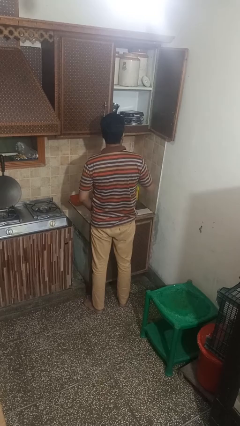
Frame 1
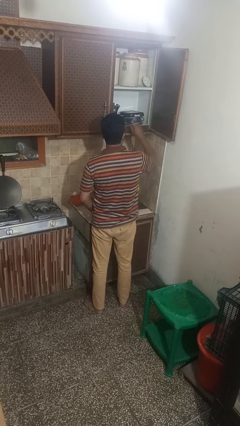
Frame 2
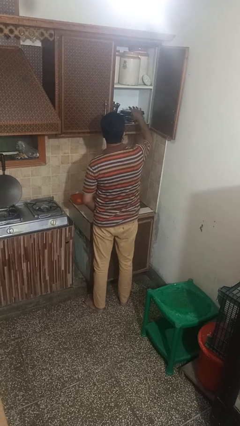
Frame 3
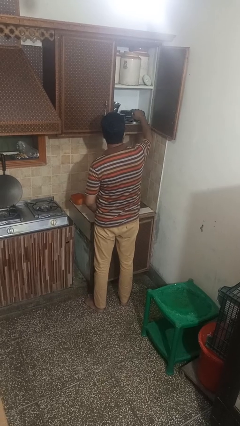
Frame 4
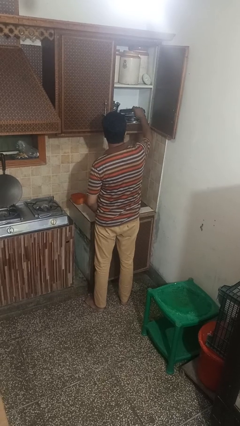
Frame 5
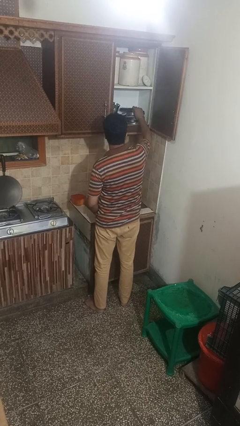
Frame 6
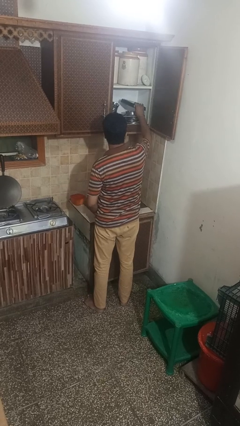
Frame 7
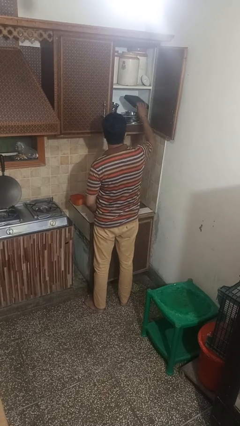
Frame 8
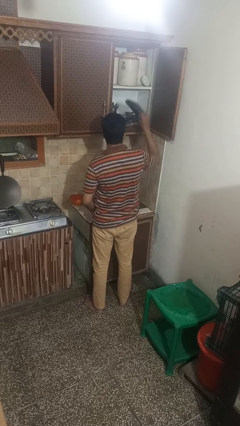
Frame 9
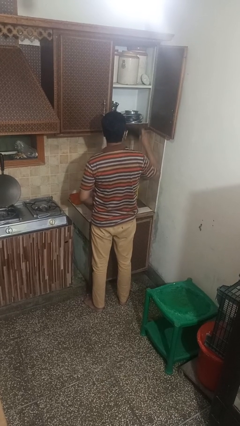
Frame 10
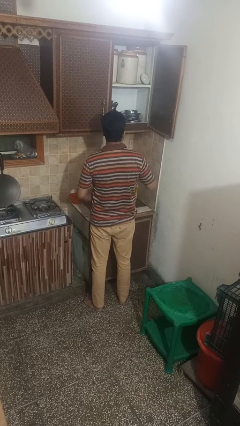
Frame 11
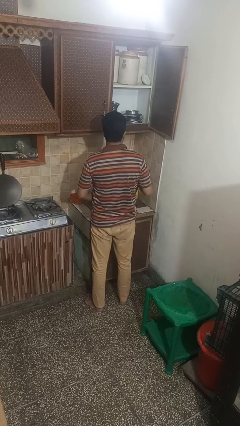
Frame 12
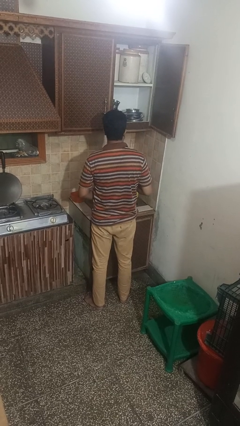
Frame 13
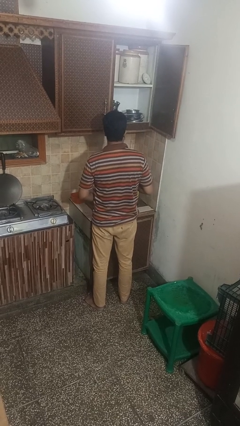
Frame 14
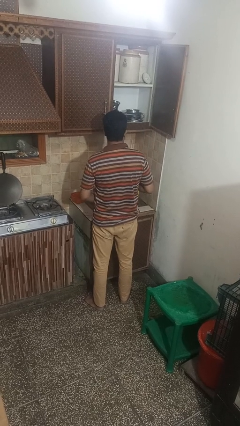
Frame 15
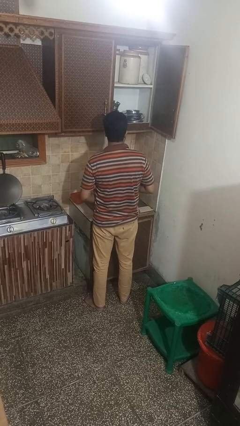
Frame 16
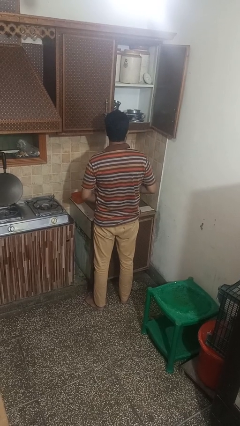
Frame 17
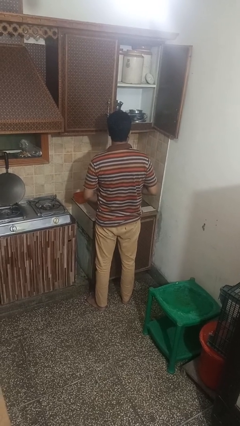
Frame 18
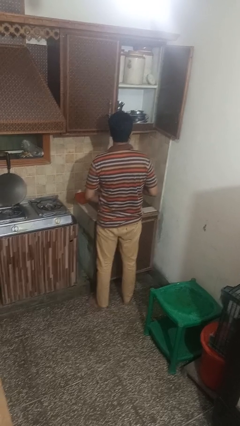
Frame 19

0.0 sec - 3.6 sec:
person takes object from cabinet

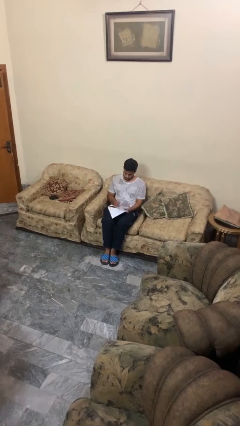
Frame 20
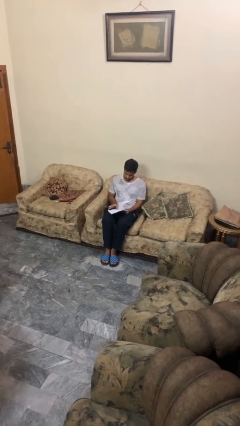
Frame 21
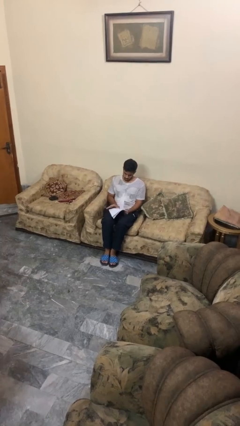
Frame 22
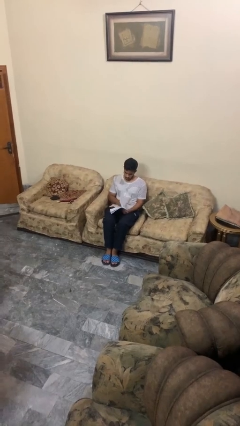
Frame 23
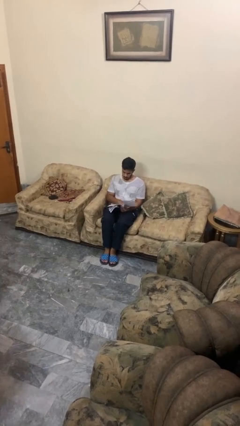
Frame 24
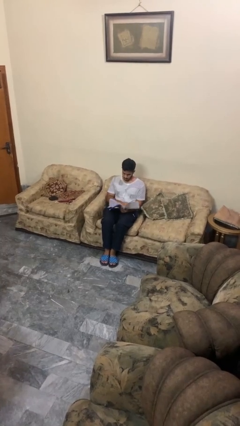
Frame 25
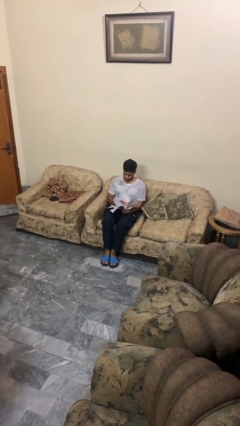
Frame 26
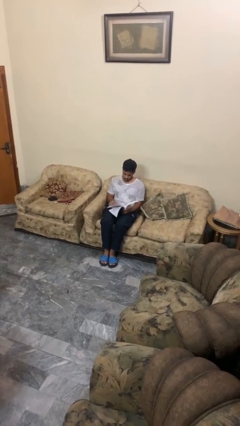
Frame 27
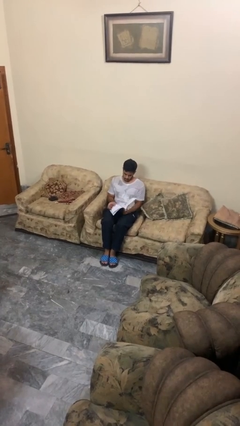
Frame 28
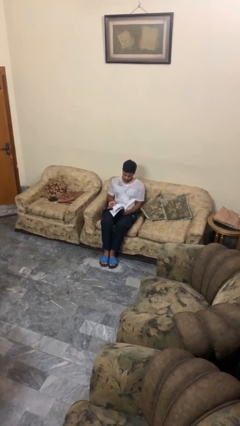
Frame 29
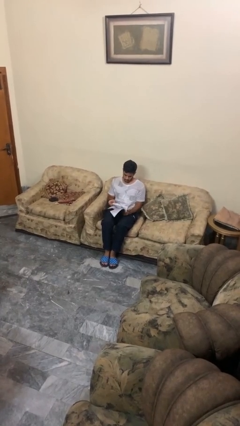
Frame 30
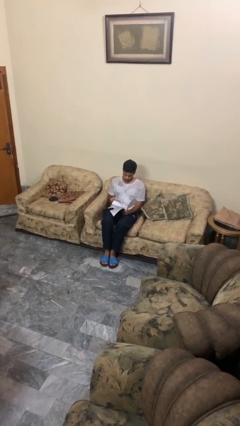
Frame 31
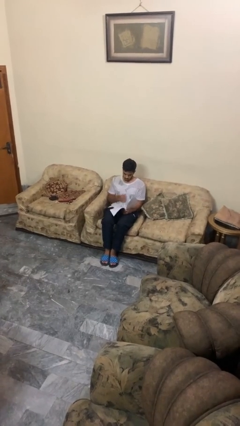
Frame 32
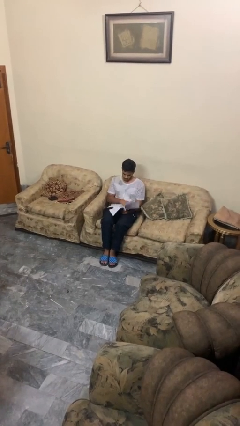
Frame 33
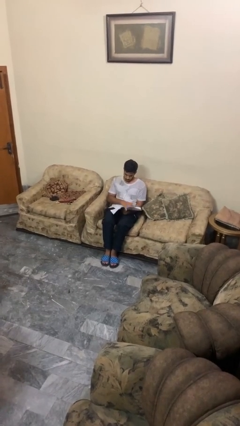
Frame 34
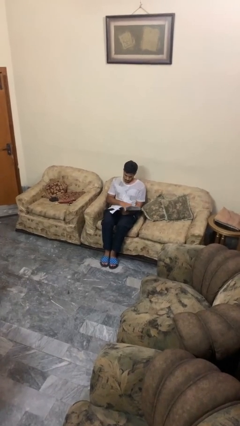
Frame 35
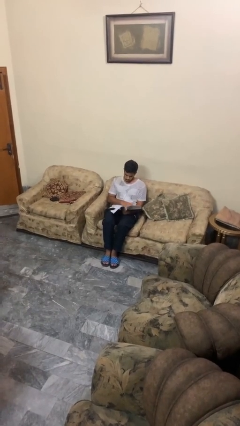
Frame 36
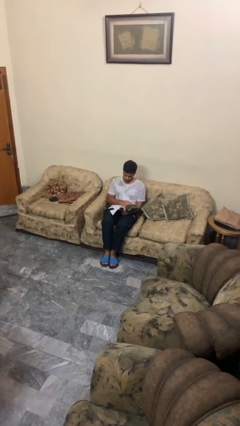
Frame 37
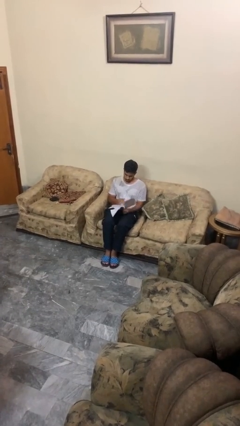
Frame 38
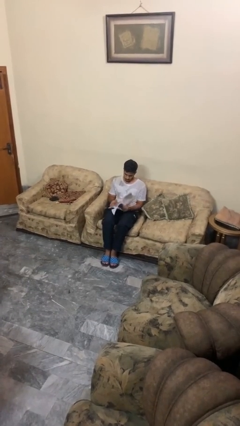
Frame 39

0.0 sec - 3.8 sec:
person reads magazine

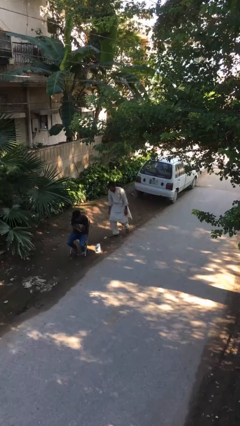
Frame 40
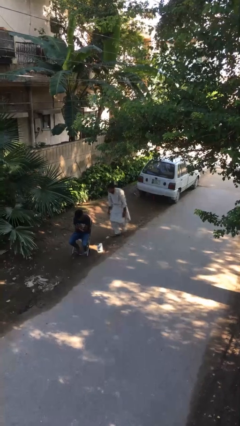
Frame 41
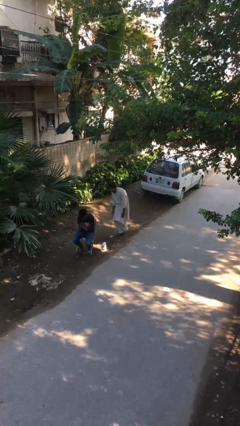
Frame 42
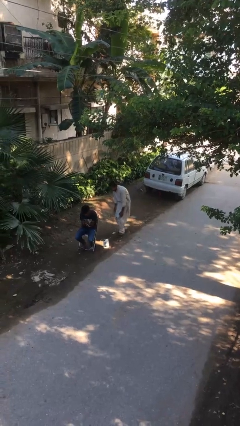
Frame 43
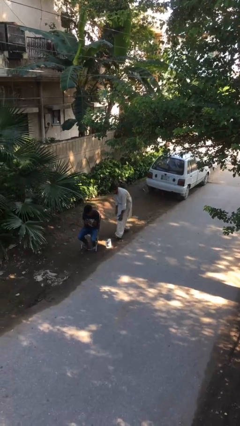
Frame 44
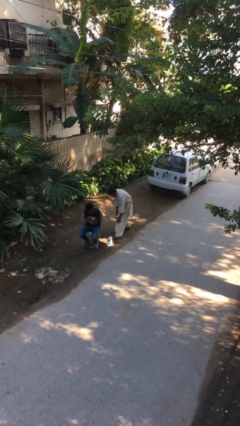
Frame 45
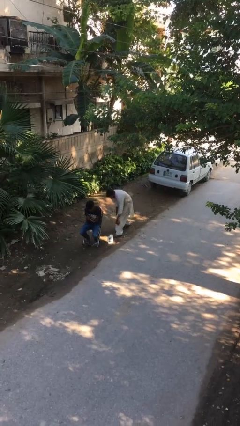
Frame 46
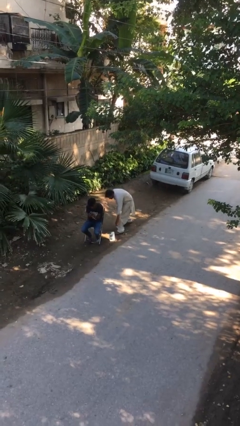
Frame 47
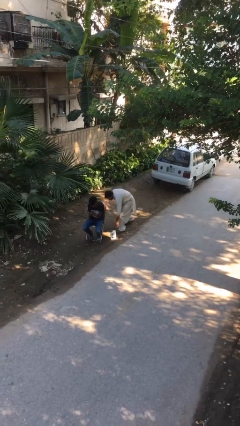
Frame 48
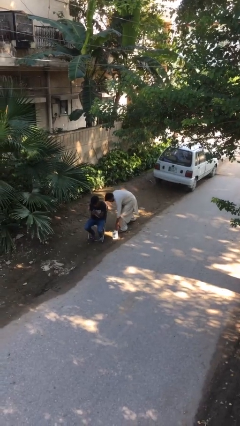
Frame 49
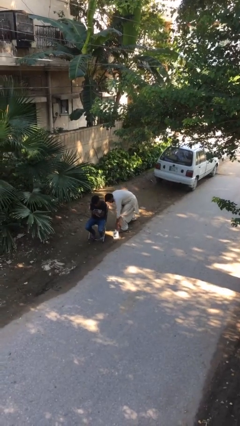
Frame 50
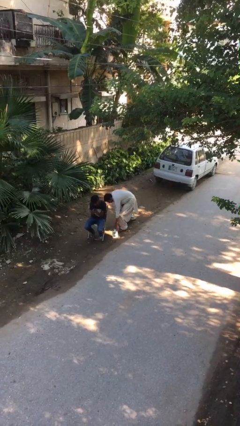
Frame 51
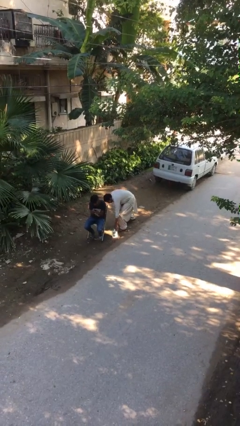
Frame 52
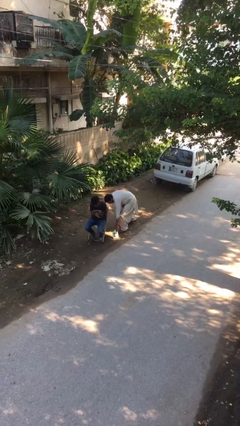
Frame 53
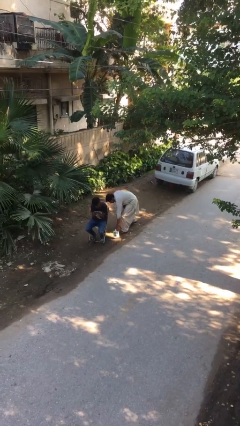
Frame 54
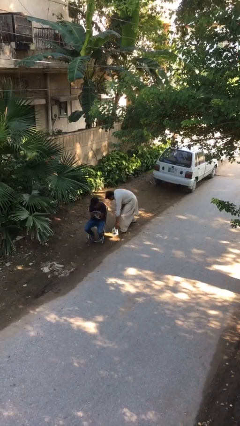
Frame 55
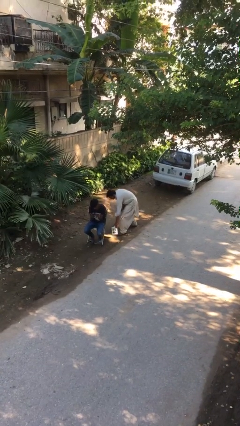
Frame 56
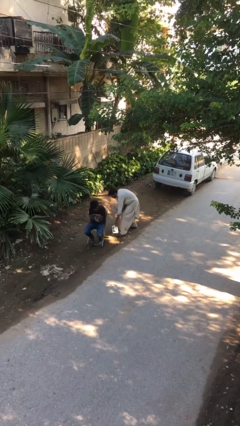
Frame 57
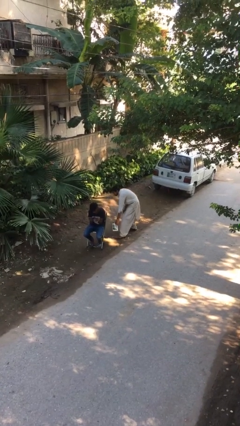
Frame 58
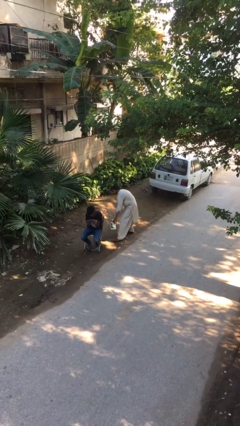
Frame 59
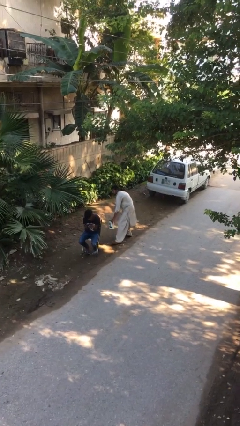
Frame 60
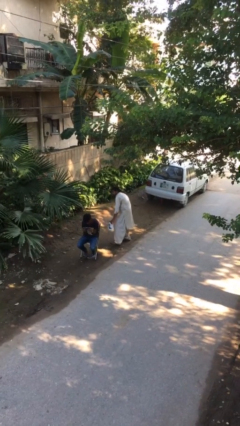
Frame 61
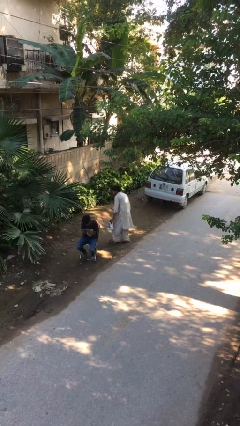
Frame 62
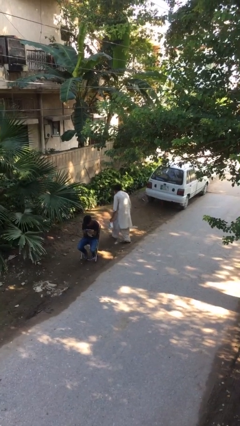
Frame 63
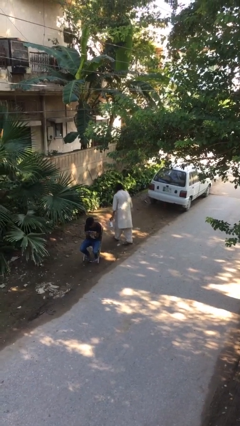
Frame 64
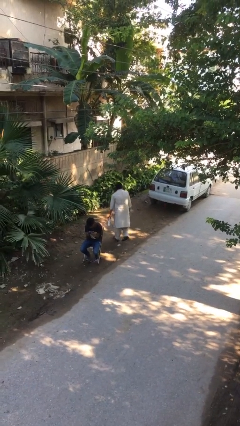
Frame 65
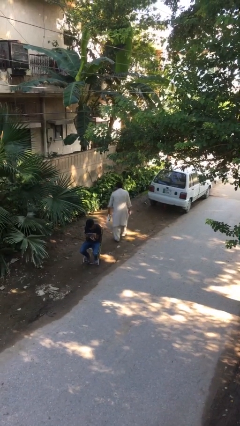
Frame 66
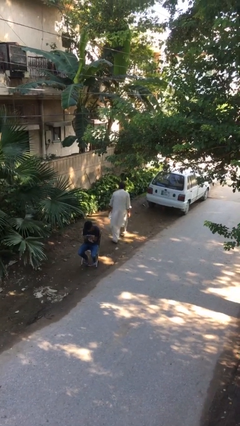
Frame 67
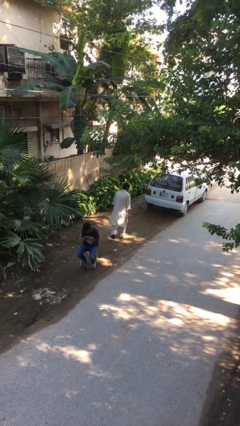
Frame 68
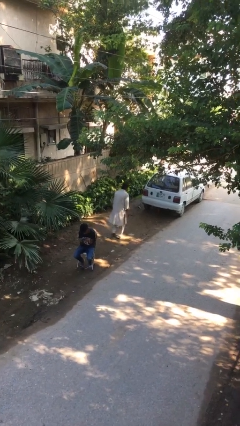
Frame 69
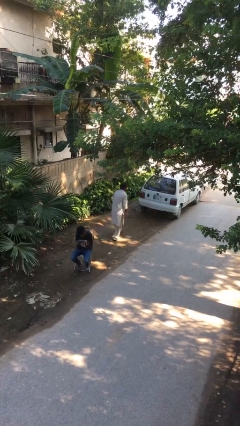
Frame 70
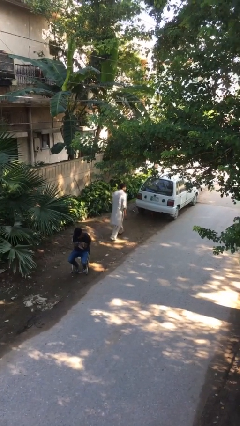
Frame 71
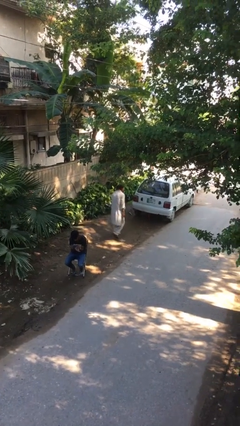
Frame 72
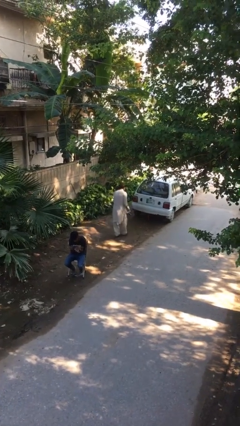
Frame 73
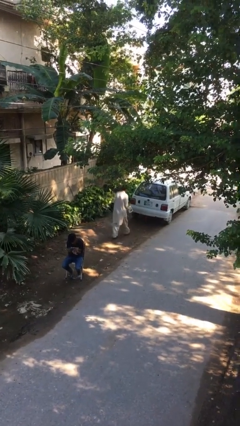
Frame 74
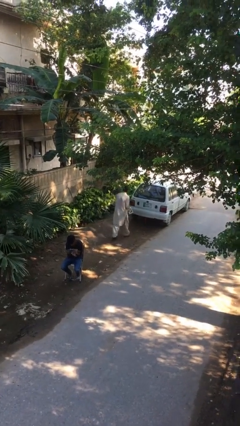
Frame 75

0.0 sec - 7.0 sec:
person steals object from person

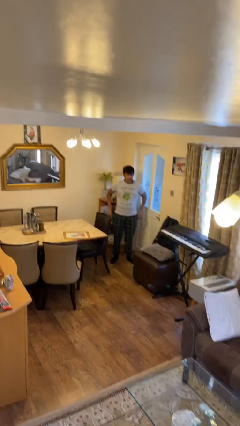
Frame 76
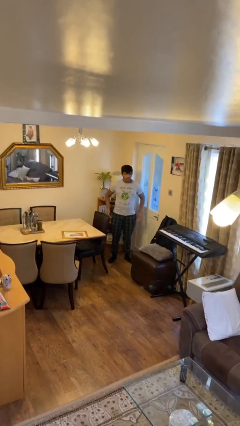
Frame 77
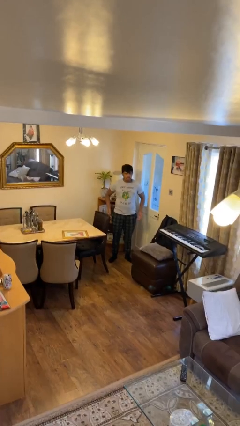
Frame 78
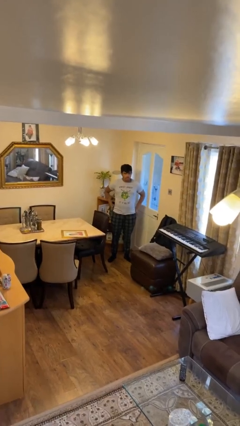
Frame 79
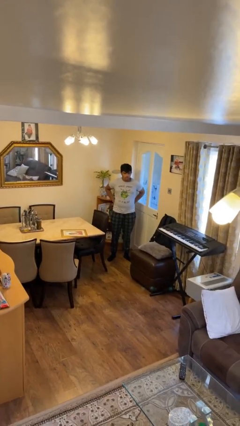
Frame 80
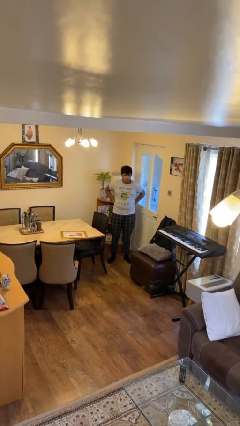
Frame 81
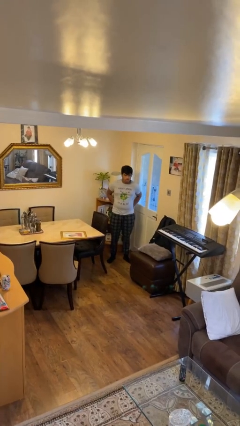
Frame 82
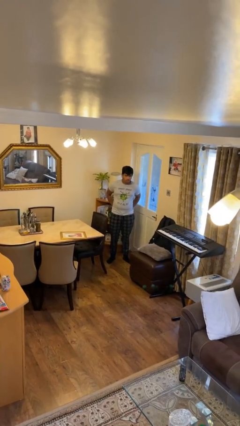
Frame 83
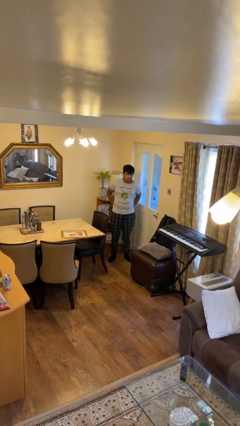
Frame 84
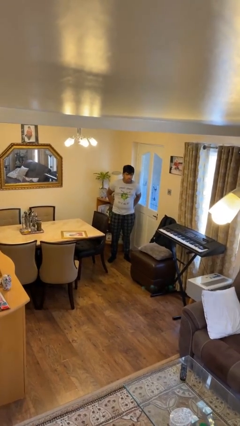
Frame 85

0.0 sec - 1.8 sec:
person puts hands in back pockets

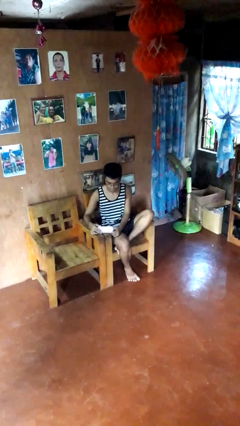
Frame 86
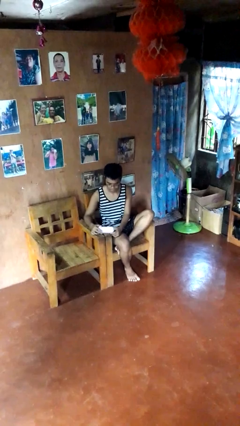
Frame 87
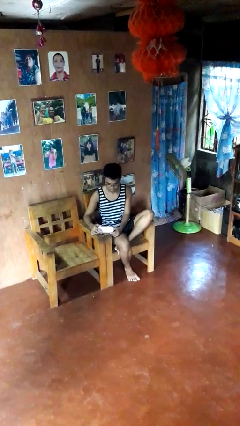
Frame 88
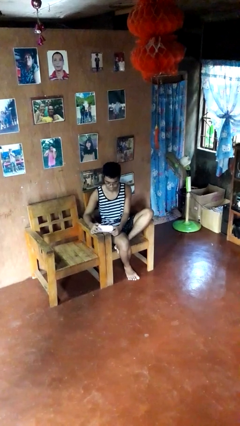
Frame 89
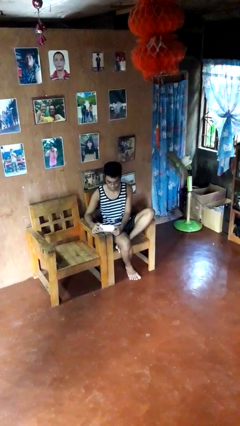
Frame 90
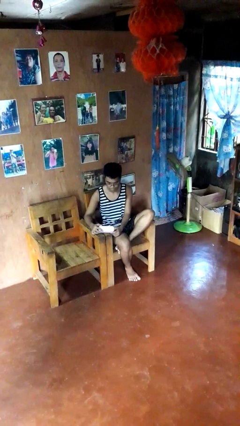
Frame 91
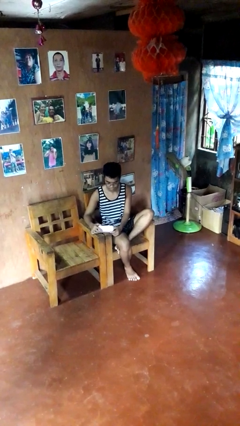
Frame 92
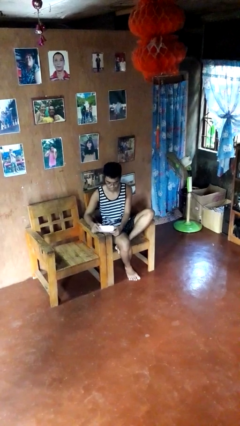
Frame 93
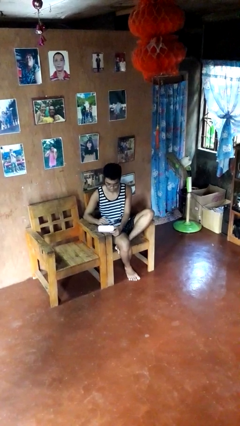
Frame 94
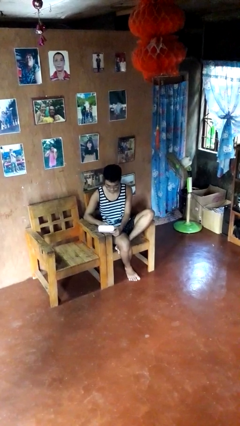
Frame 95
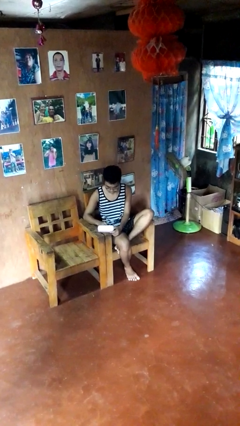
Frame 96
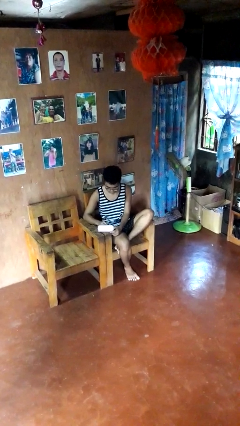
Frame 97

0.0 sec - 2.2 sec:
person opens jewelry box
